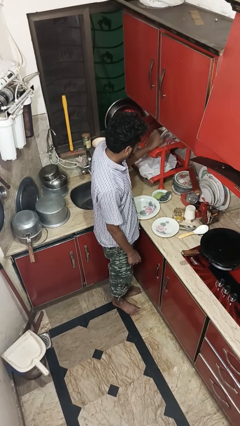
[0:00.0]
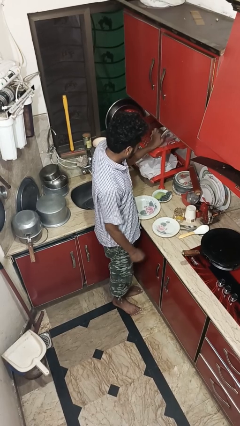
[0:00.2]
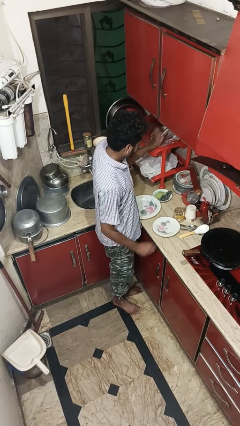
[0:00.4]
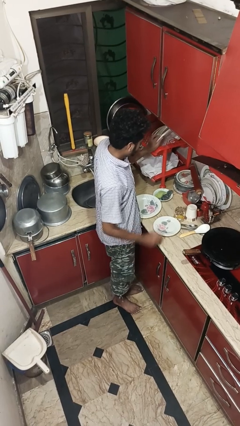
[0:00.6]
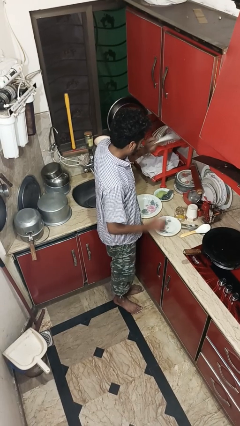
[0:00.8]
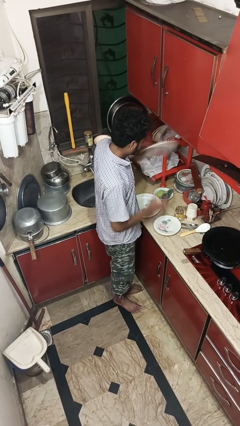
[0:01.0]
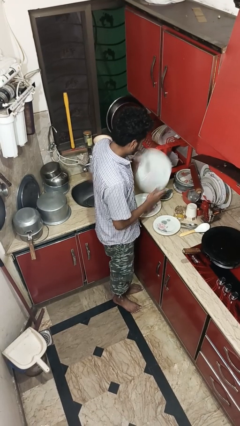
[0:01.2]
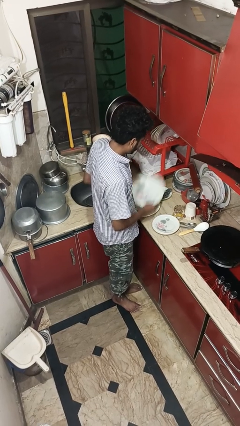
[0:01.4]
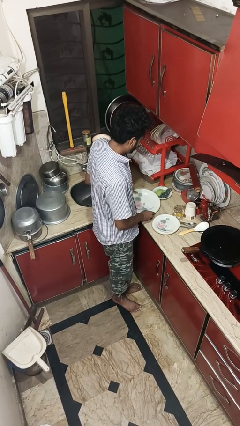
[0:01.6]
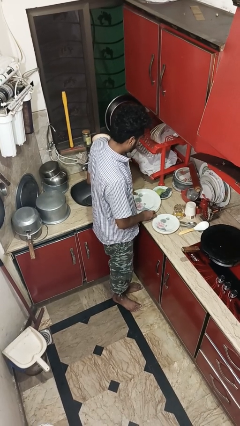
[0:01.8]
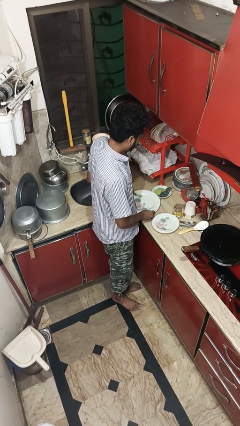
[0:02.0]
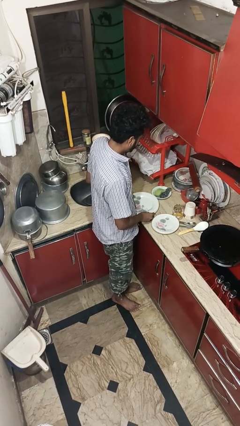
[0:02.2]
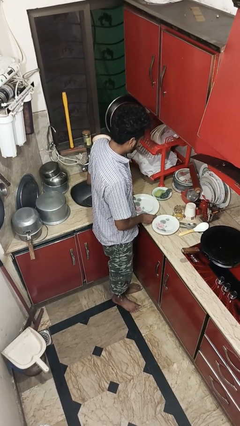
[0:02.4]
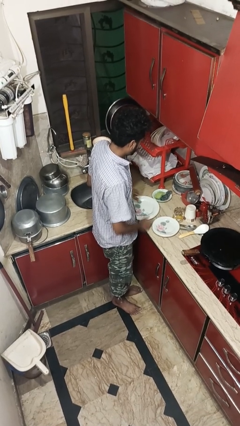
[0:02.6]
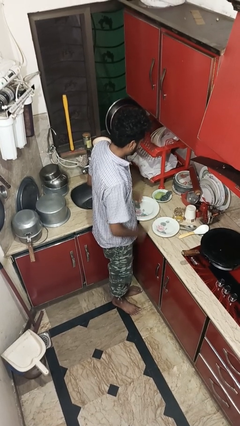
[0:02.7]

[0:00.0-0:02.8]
person unloads dishwasher

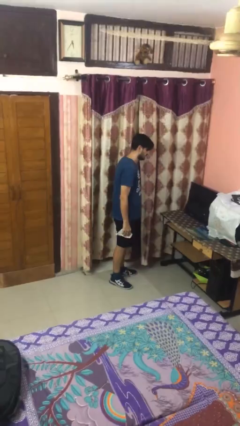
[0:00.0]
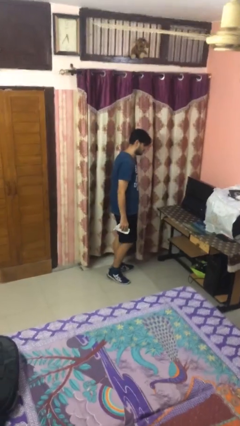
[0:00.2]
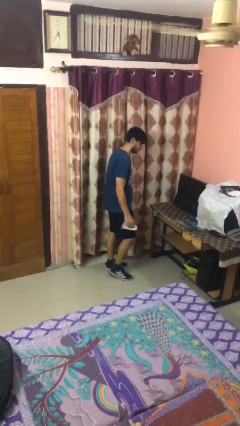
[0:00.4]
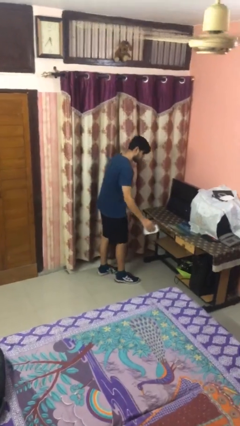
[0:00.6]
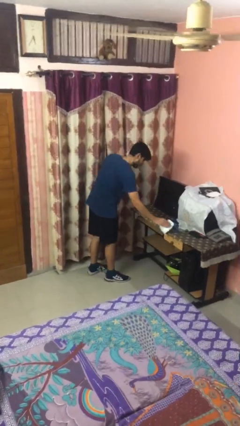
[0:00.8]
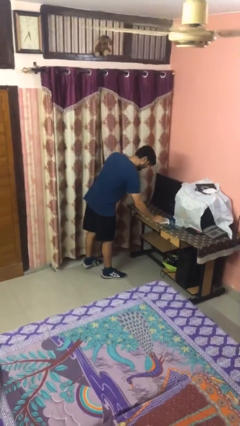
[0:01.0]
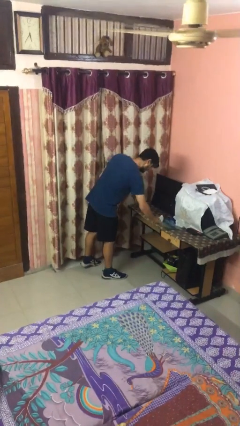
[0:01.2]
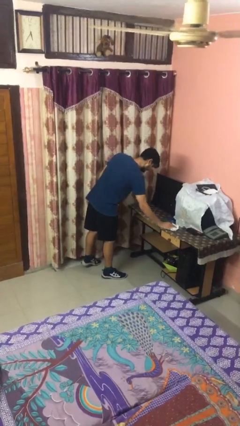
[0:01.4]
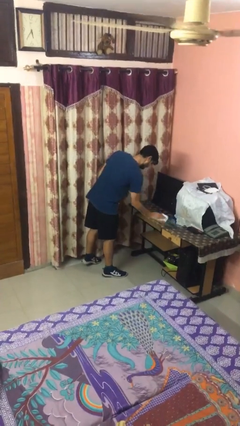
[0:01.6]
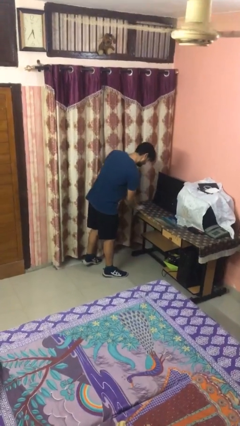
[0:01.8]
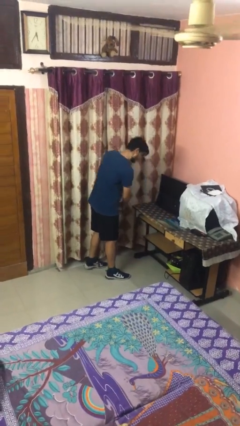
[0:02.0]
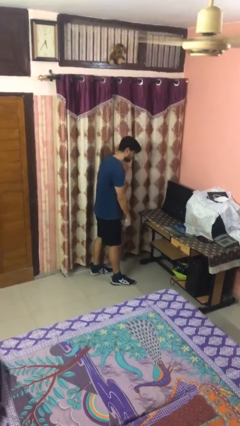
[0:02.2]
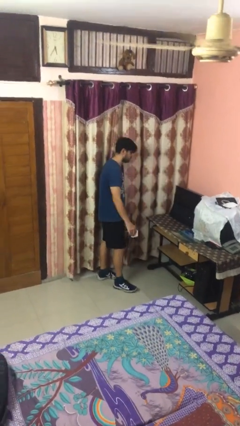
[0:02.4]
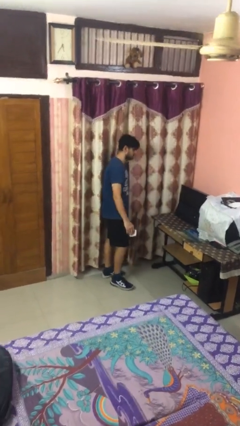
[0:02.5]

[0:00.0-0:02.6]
person cleans table with rag

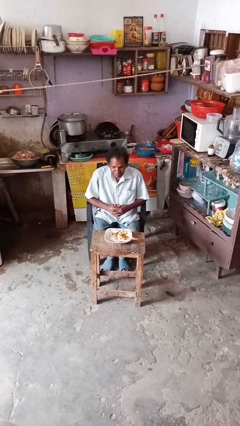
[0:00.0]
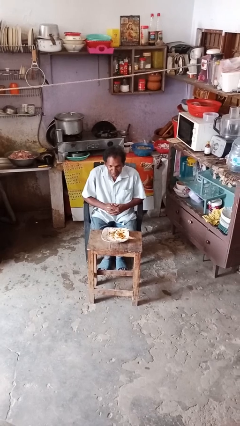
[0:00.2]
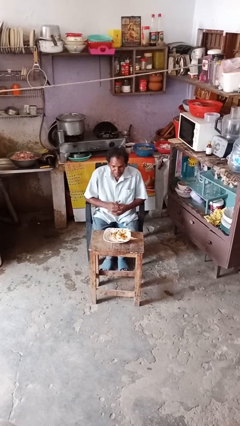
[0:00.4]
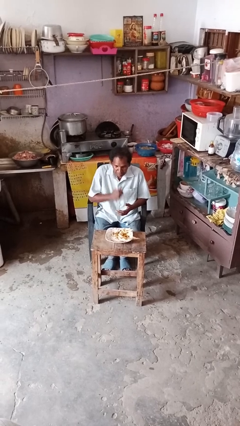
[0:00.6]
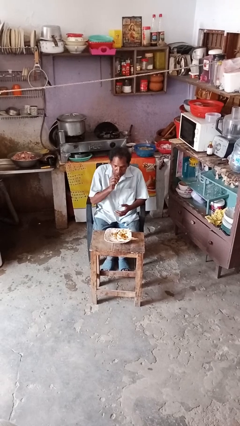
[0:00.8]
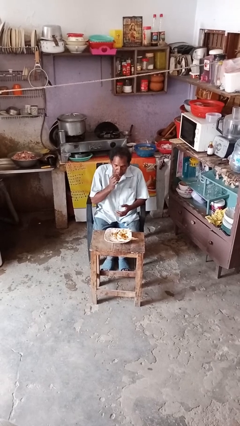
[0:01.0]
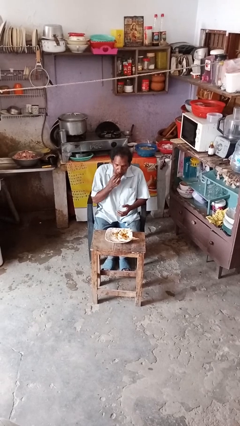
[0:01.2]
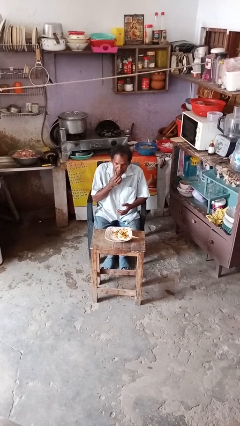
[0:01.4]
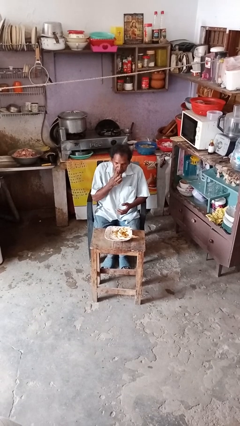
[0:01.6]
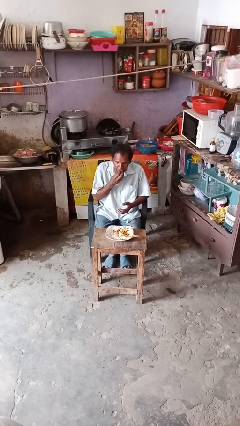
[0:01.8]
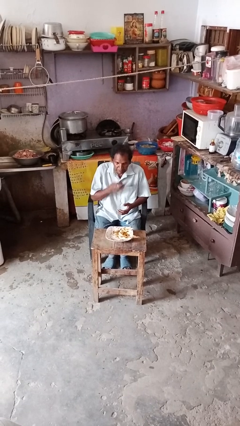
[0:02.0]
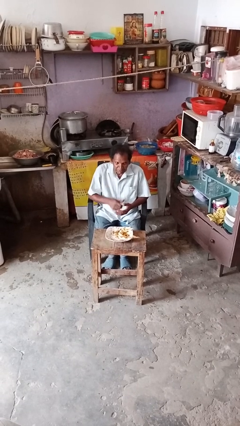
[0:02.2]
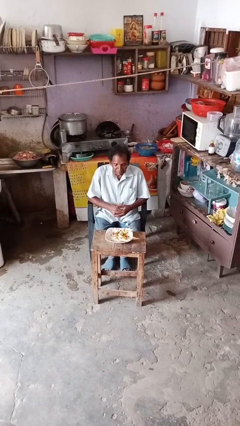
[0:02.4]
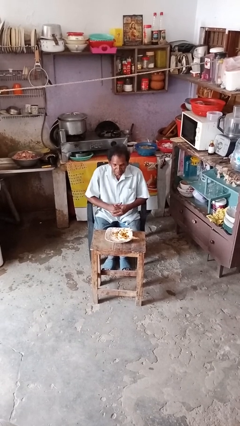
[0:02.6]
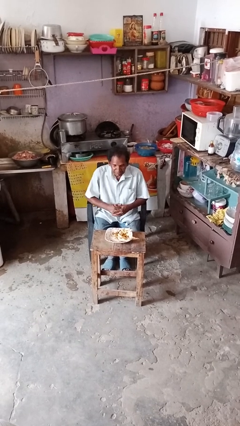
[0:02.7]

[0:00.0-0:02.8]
person licks fingers

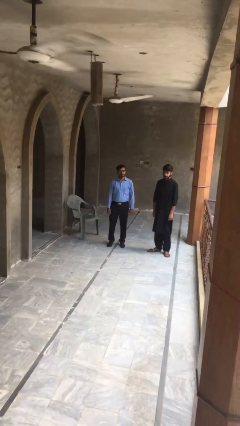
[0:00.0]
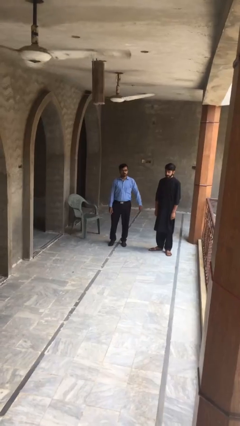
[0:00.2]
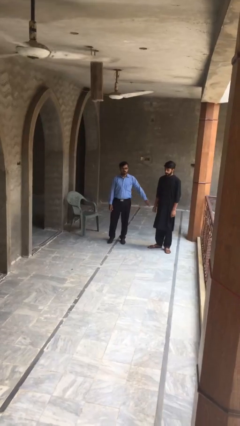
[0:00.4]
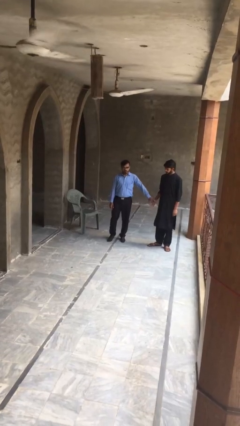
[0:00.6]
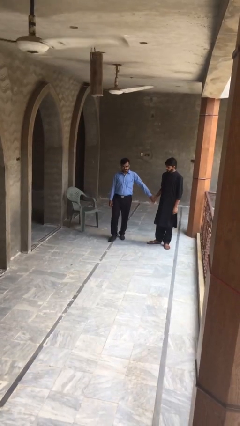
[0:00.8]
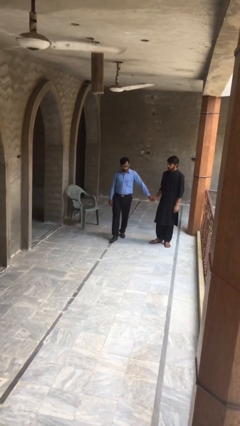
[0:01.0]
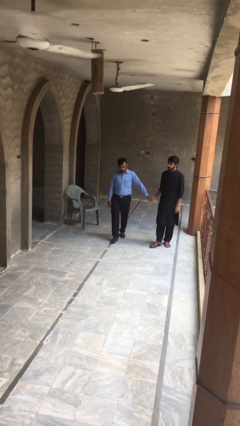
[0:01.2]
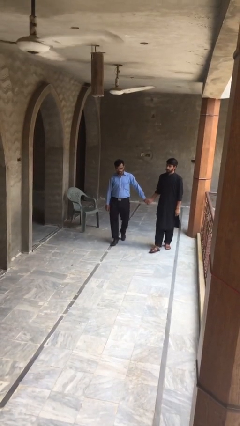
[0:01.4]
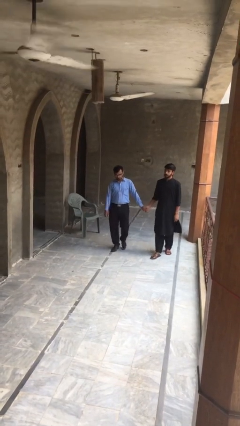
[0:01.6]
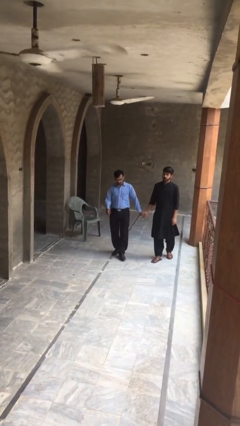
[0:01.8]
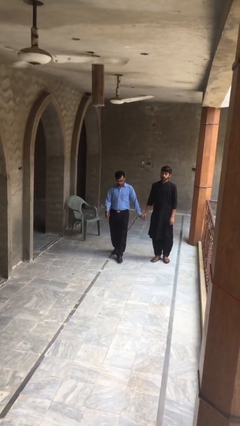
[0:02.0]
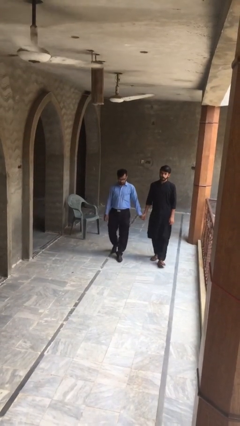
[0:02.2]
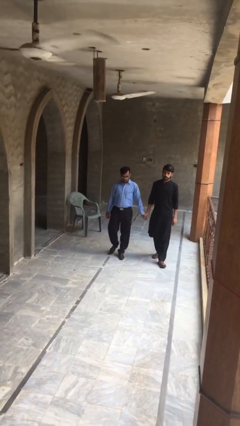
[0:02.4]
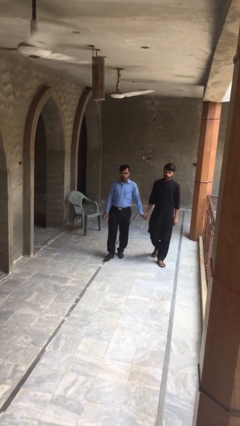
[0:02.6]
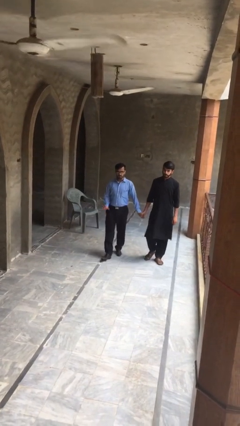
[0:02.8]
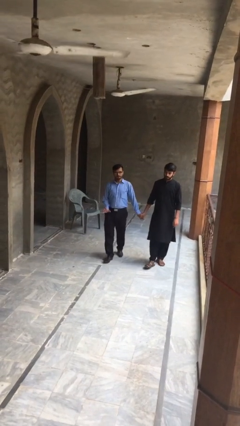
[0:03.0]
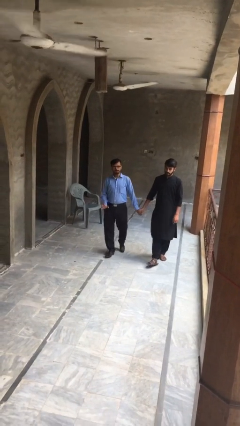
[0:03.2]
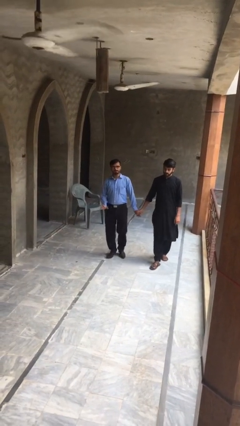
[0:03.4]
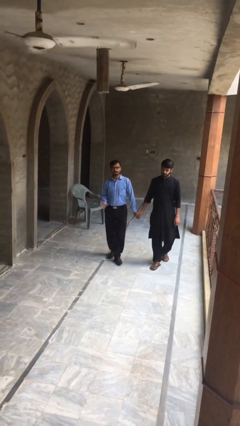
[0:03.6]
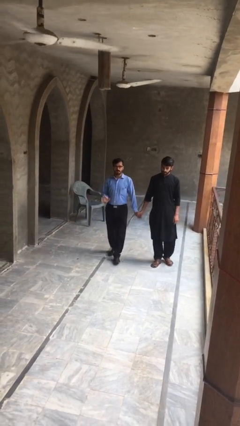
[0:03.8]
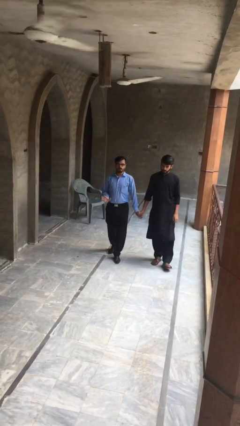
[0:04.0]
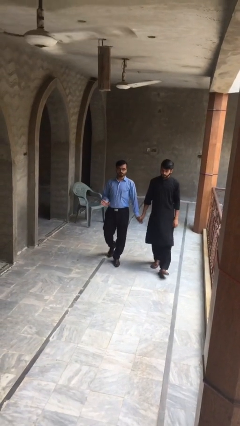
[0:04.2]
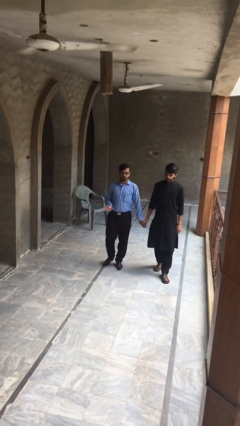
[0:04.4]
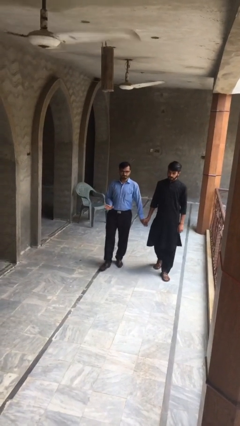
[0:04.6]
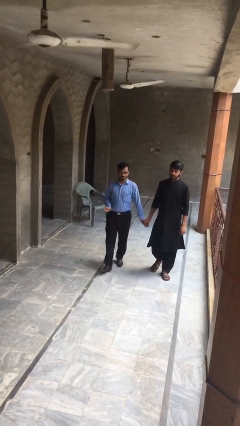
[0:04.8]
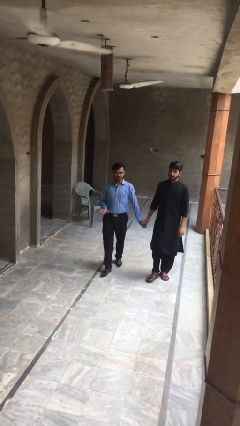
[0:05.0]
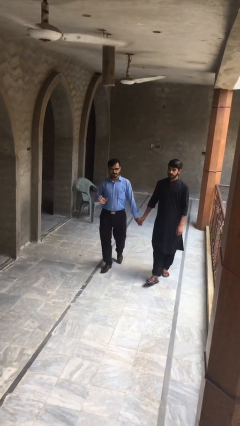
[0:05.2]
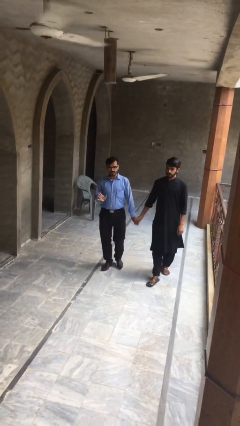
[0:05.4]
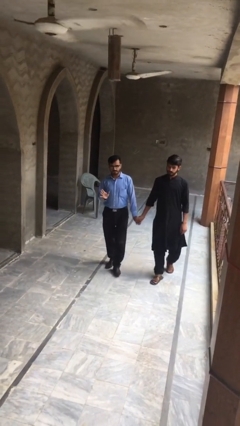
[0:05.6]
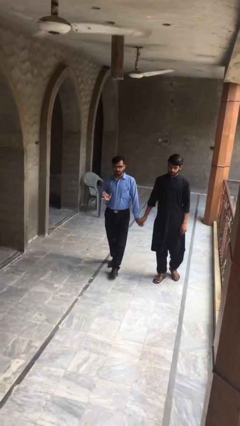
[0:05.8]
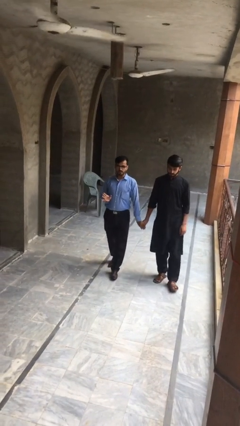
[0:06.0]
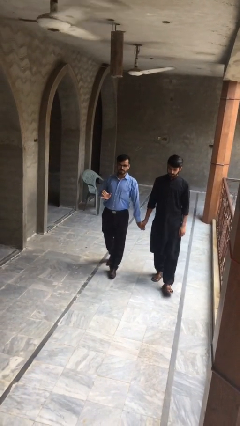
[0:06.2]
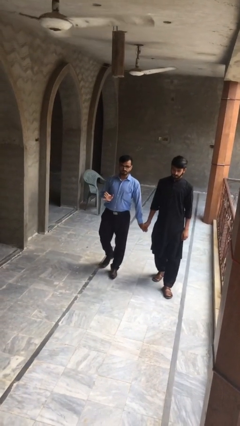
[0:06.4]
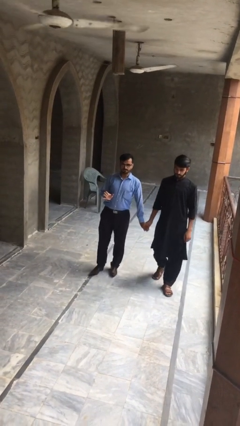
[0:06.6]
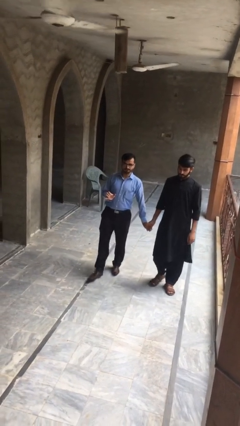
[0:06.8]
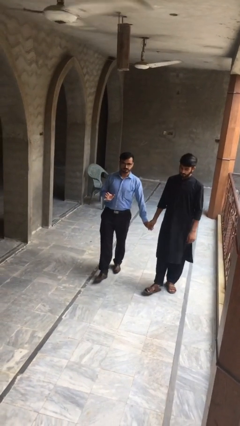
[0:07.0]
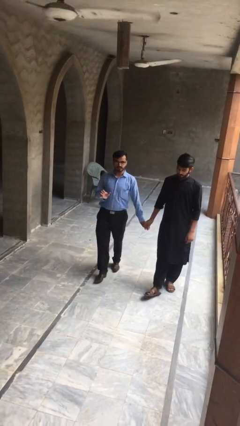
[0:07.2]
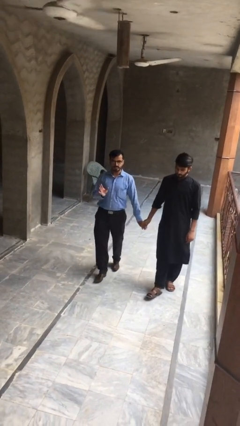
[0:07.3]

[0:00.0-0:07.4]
person holds hand

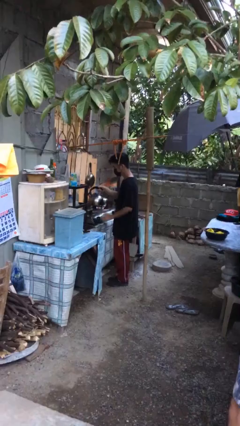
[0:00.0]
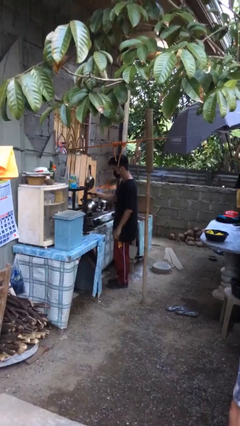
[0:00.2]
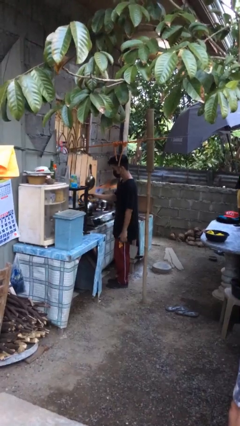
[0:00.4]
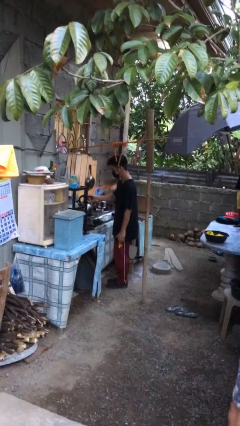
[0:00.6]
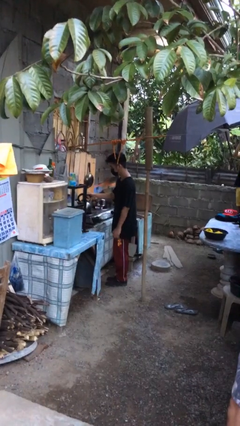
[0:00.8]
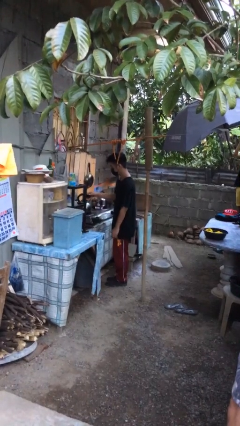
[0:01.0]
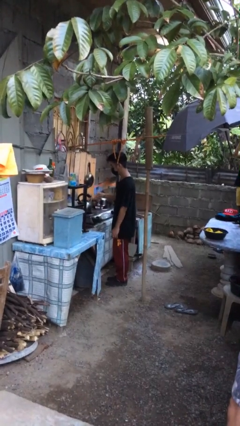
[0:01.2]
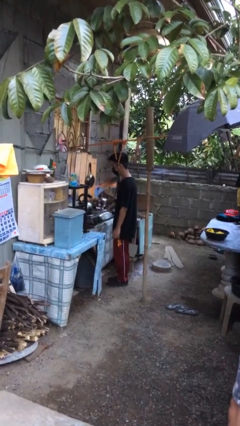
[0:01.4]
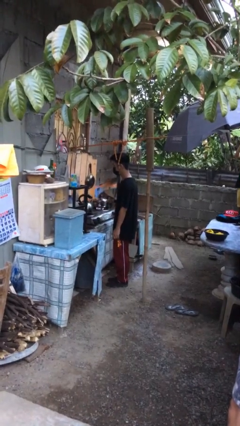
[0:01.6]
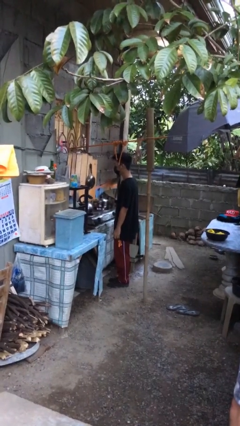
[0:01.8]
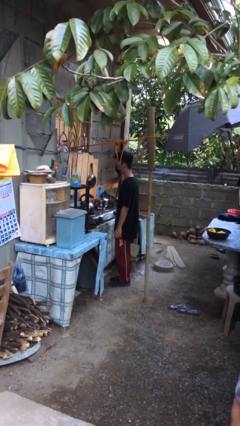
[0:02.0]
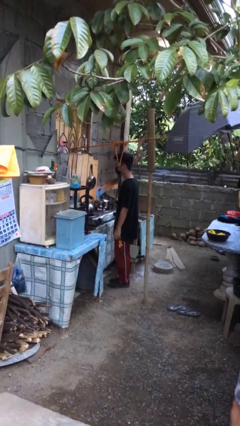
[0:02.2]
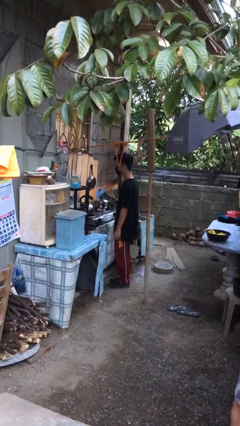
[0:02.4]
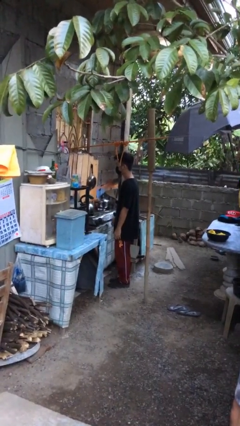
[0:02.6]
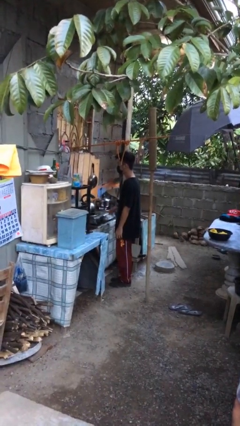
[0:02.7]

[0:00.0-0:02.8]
person puts down object on countertop
